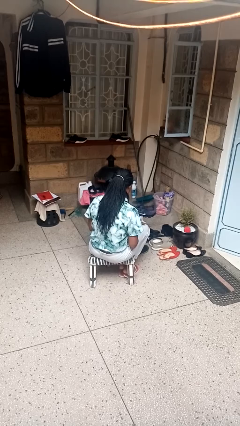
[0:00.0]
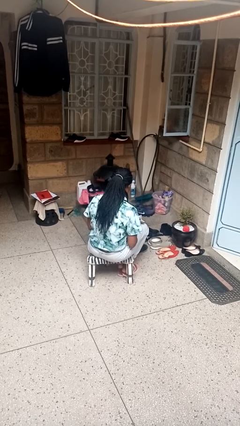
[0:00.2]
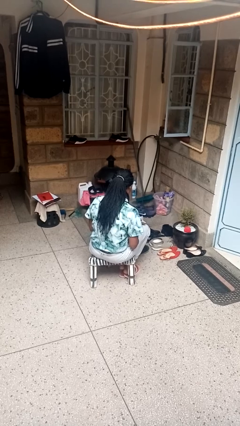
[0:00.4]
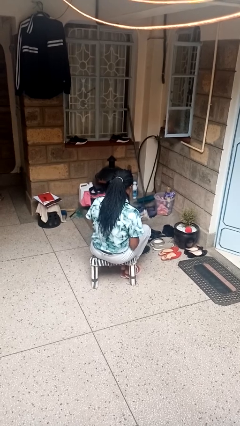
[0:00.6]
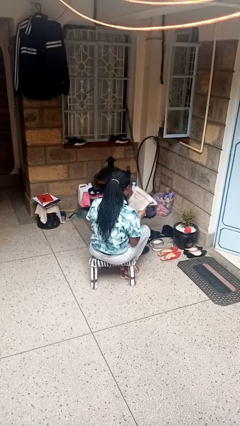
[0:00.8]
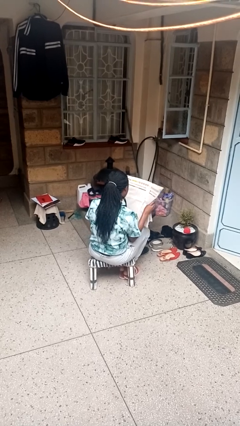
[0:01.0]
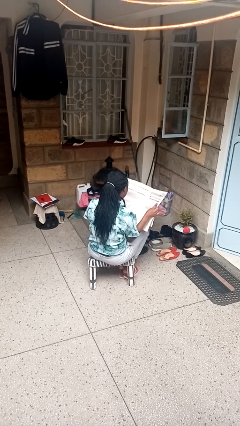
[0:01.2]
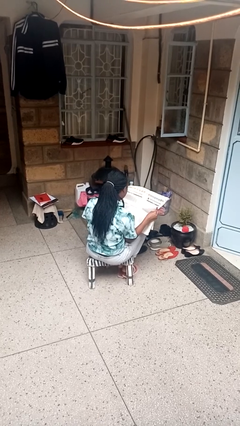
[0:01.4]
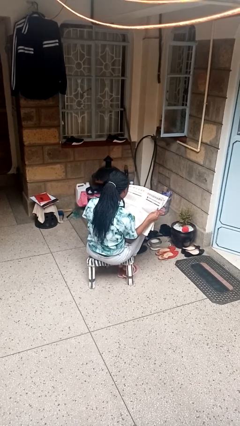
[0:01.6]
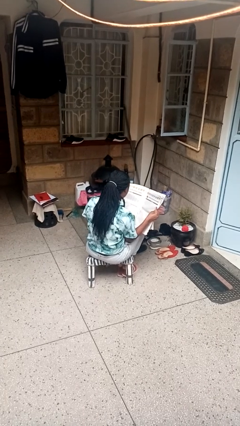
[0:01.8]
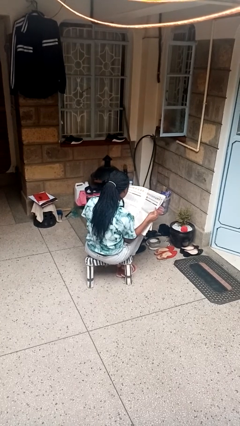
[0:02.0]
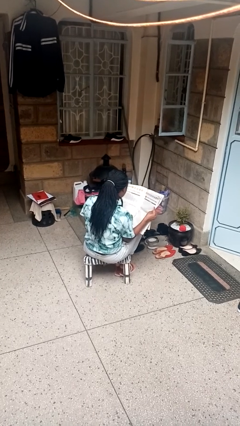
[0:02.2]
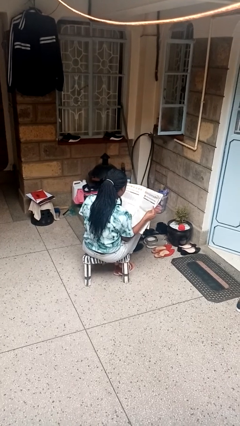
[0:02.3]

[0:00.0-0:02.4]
person reads newspaper

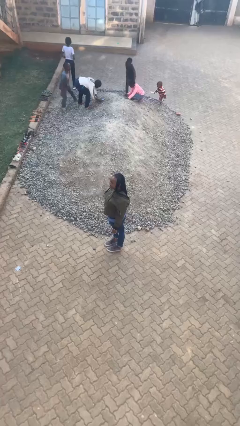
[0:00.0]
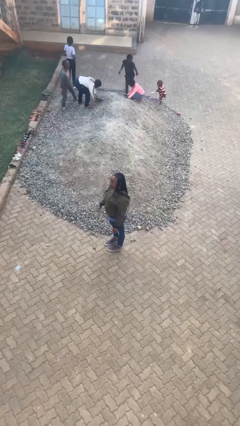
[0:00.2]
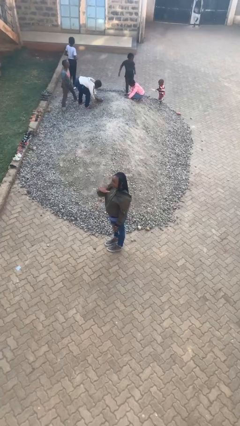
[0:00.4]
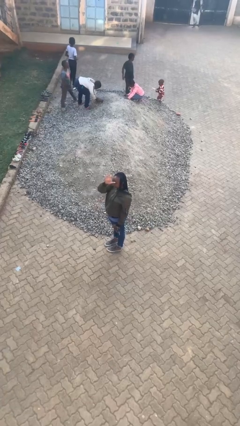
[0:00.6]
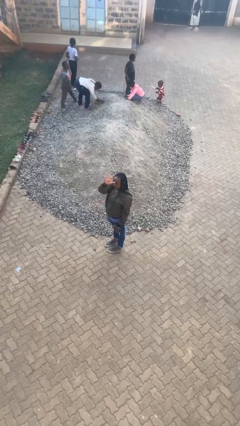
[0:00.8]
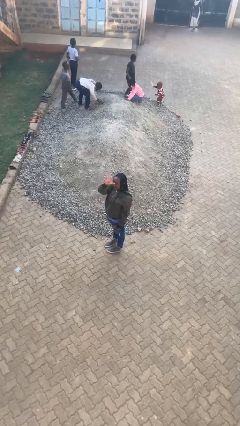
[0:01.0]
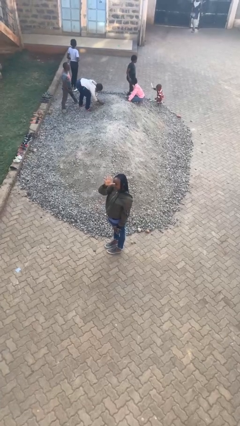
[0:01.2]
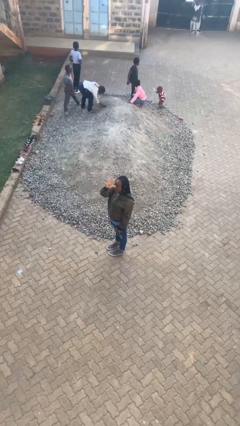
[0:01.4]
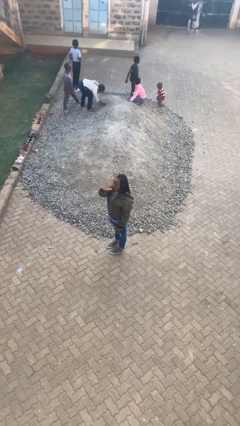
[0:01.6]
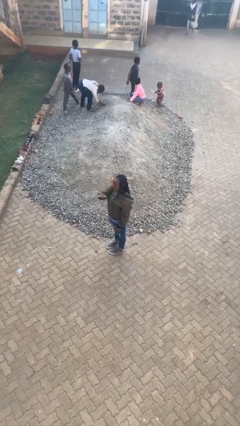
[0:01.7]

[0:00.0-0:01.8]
person gestures number five

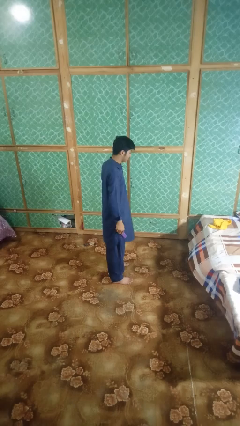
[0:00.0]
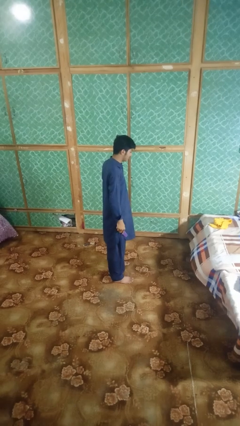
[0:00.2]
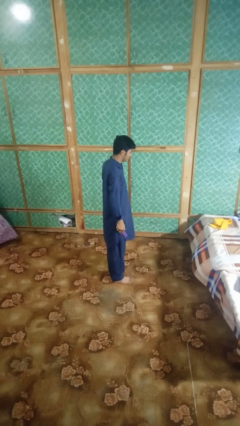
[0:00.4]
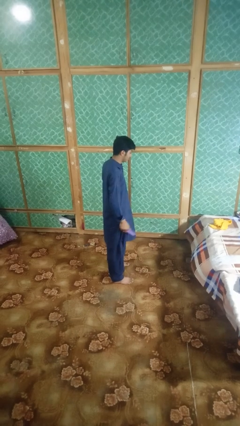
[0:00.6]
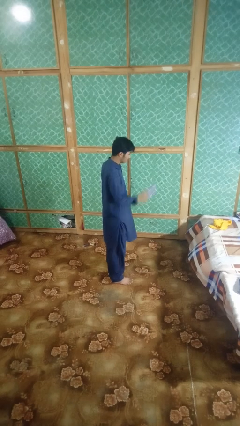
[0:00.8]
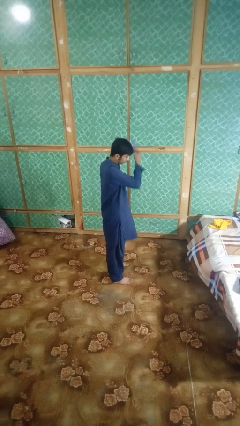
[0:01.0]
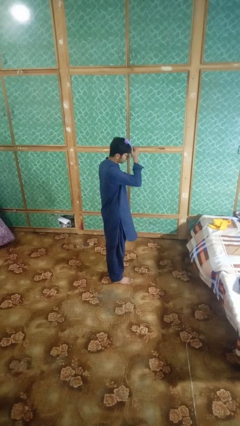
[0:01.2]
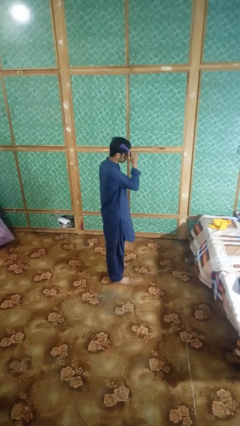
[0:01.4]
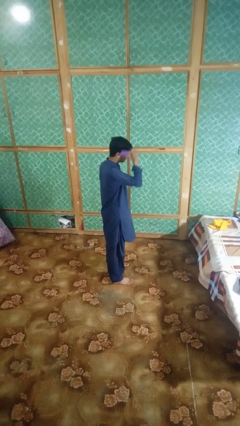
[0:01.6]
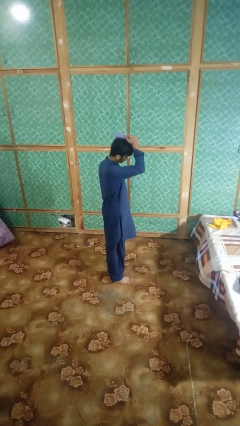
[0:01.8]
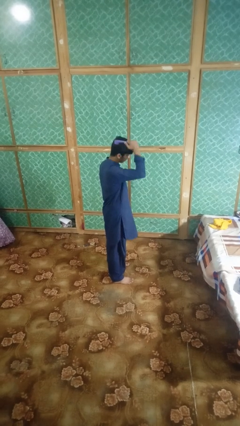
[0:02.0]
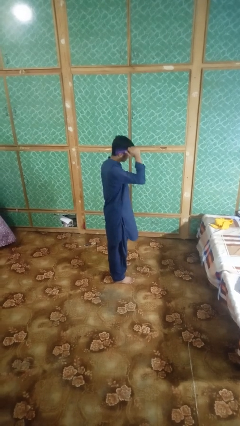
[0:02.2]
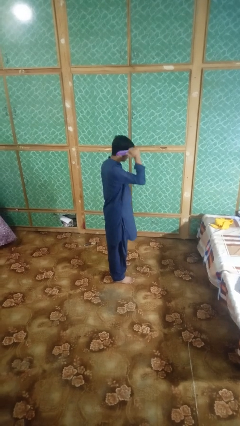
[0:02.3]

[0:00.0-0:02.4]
person brushes hair

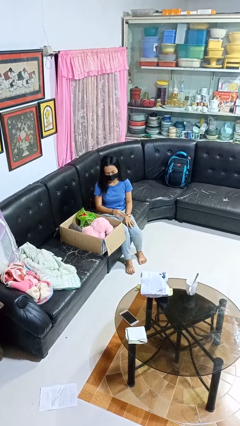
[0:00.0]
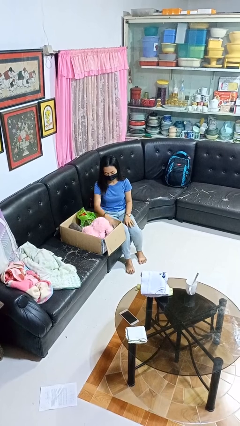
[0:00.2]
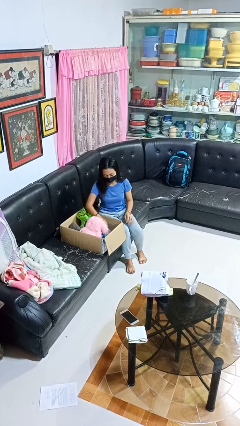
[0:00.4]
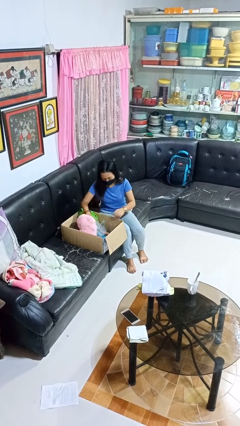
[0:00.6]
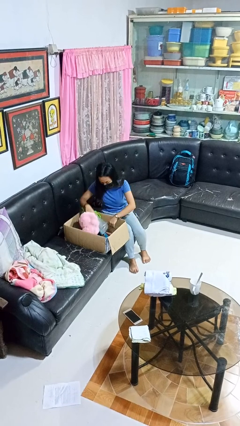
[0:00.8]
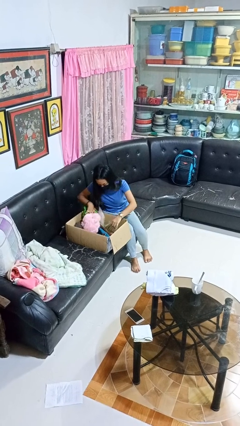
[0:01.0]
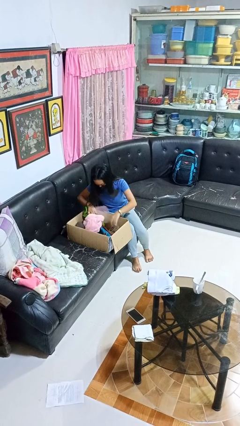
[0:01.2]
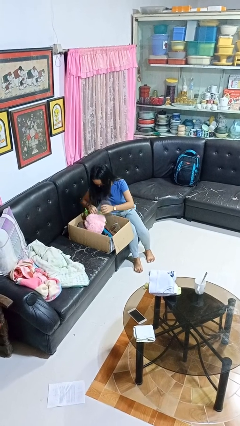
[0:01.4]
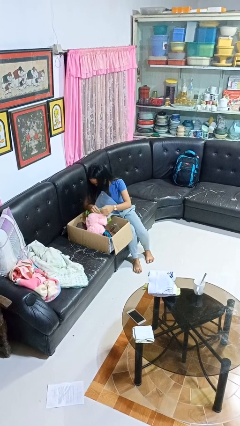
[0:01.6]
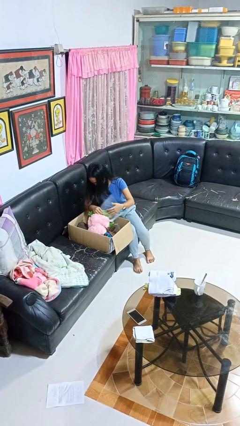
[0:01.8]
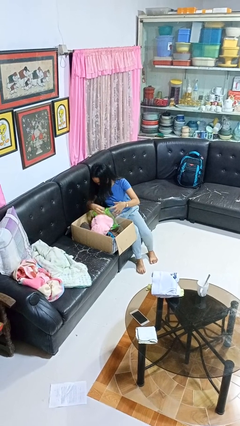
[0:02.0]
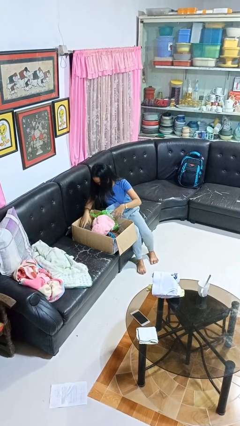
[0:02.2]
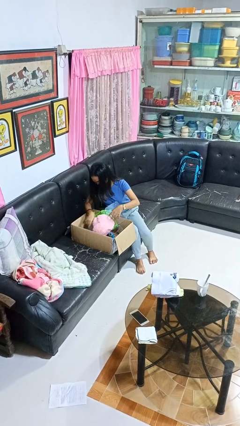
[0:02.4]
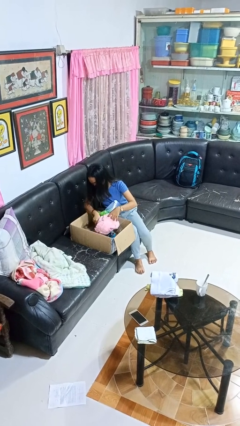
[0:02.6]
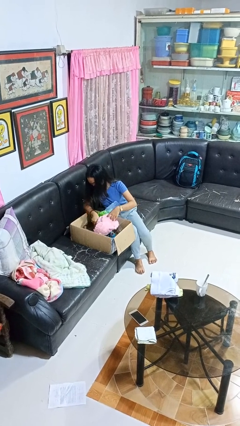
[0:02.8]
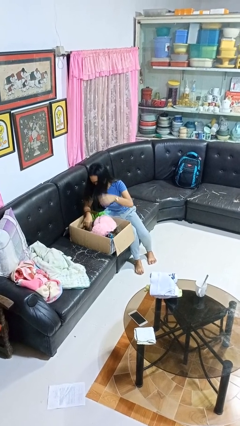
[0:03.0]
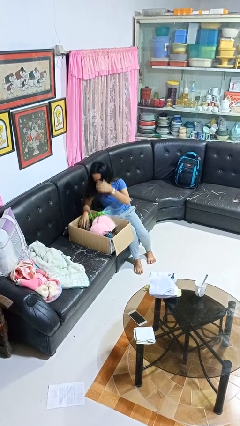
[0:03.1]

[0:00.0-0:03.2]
person searches in box

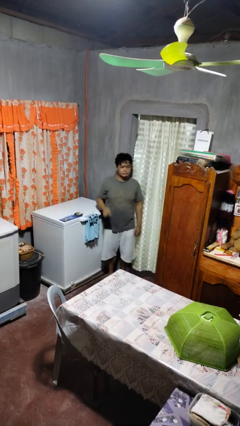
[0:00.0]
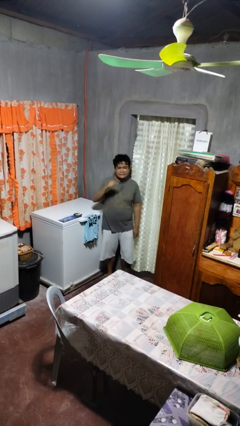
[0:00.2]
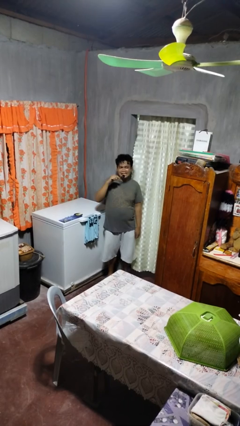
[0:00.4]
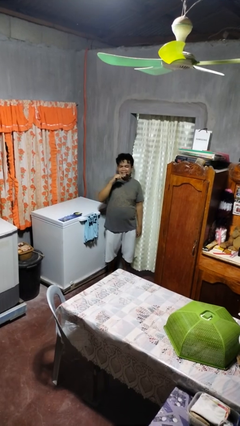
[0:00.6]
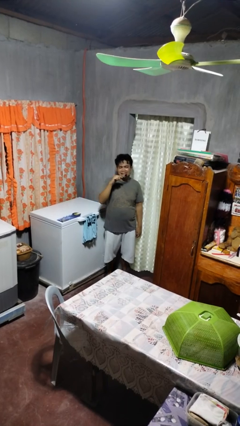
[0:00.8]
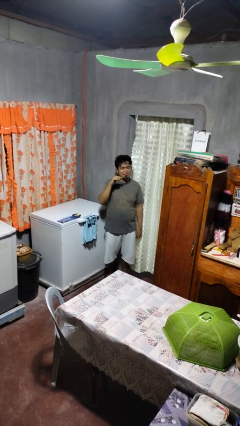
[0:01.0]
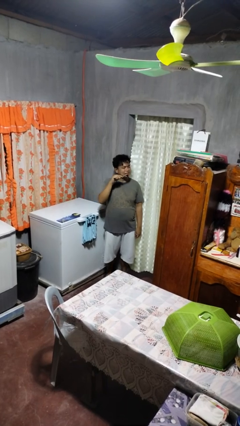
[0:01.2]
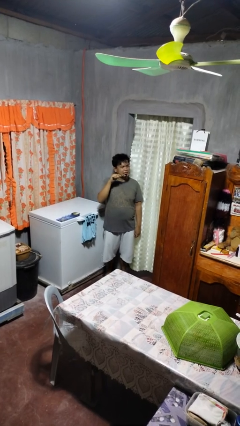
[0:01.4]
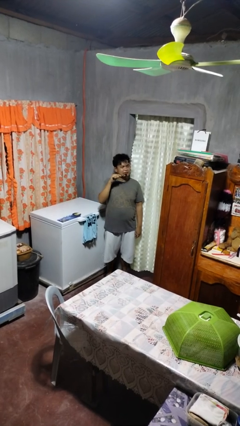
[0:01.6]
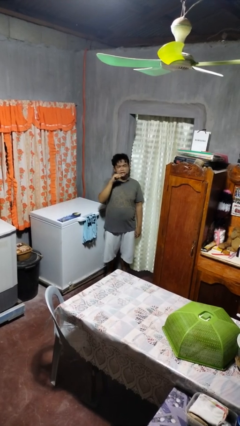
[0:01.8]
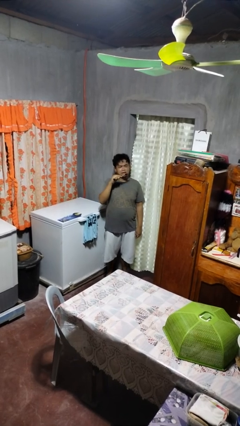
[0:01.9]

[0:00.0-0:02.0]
person brushes teeth

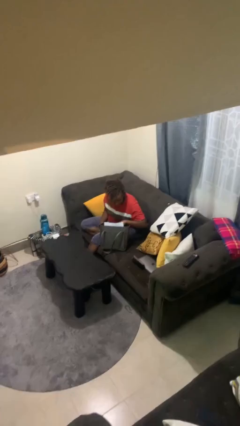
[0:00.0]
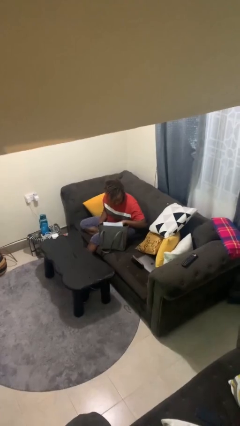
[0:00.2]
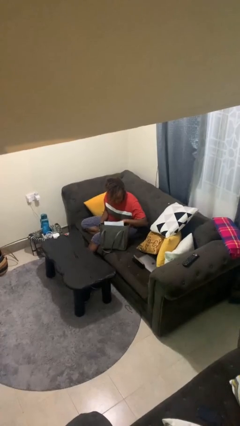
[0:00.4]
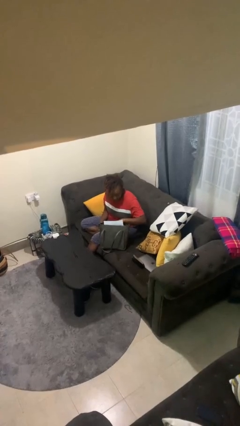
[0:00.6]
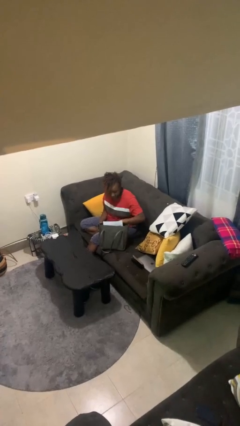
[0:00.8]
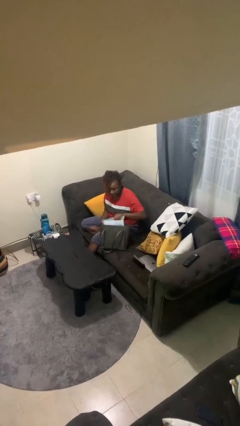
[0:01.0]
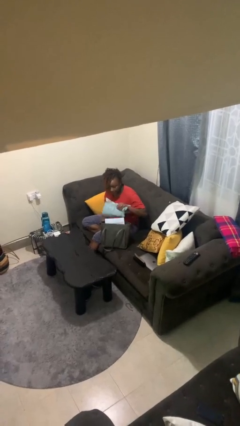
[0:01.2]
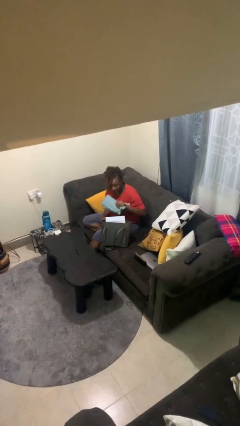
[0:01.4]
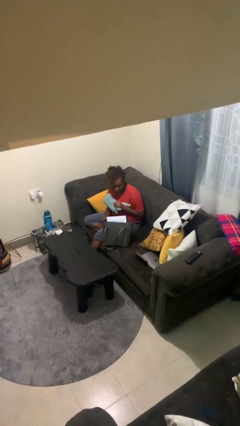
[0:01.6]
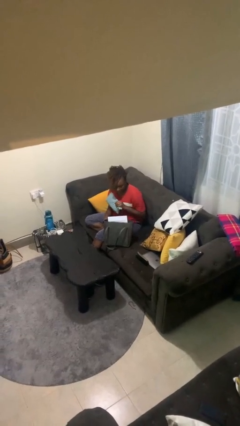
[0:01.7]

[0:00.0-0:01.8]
person takes object from purse

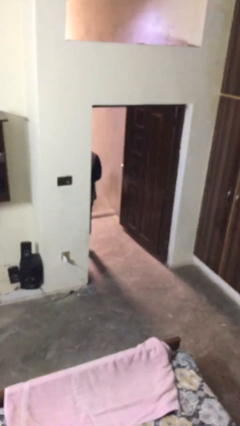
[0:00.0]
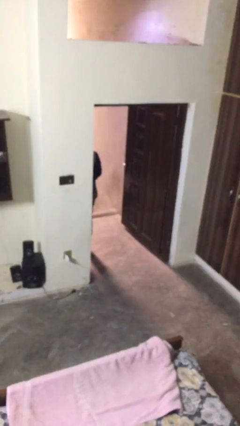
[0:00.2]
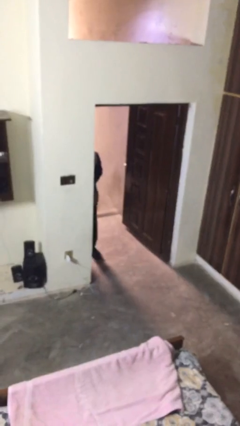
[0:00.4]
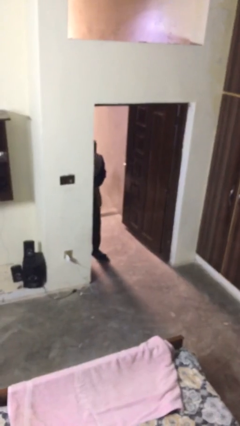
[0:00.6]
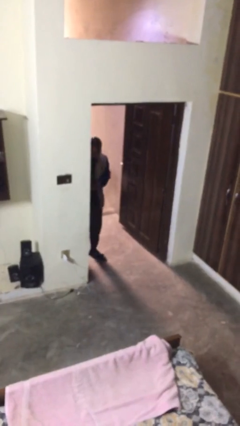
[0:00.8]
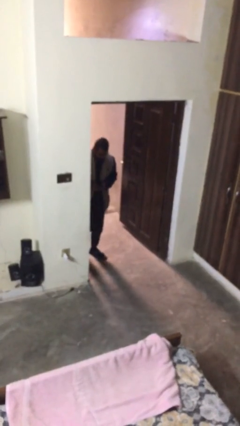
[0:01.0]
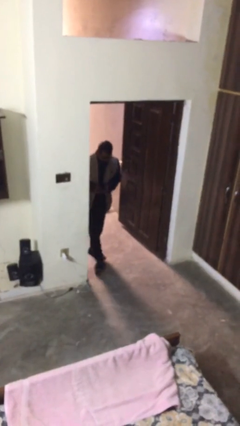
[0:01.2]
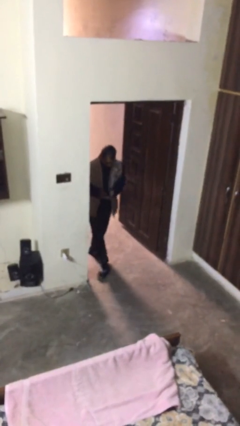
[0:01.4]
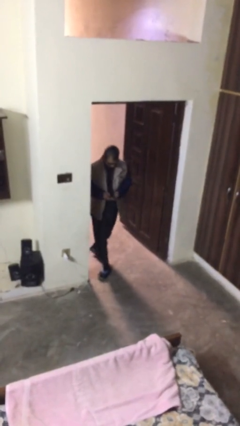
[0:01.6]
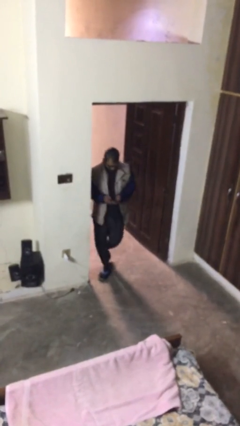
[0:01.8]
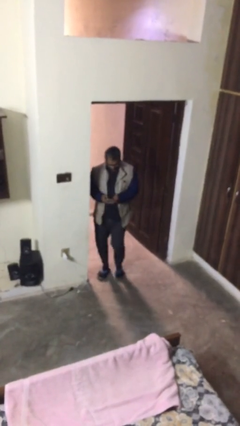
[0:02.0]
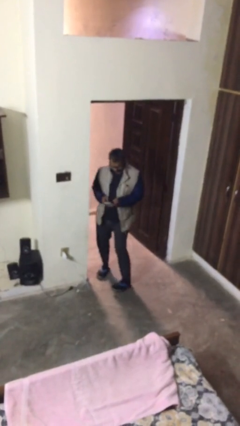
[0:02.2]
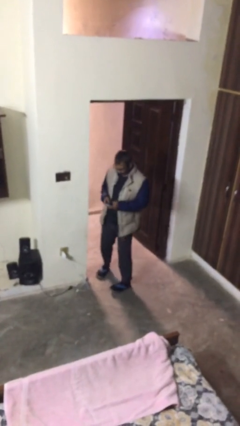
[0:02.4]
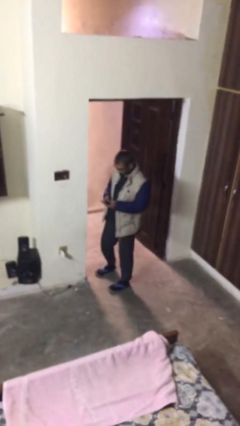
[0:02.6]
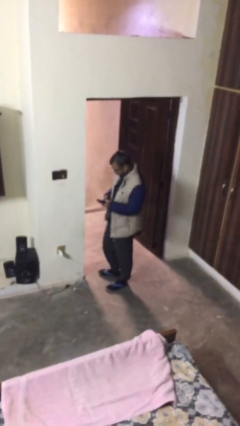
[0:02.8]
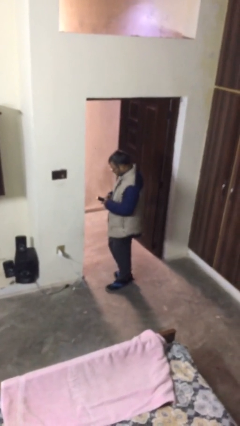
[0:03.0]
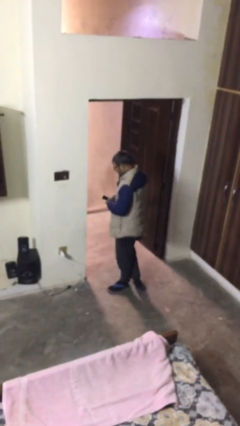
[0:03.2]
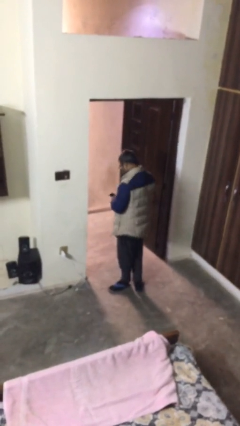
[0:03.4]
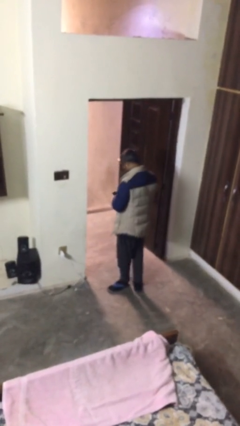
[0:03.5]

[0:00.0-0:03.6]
person enters scene through structure
